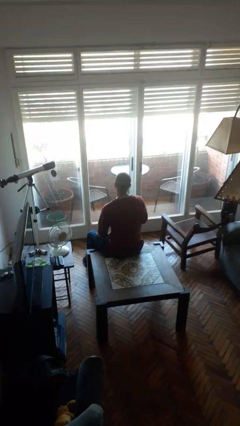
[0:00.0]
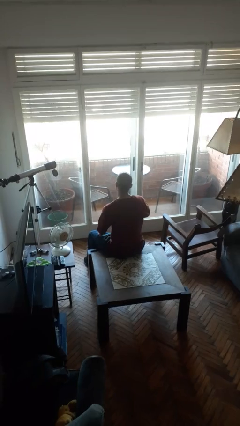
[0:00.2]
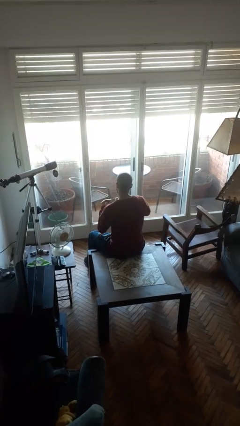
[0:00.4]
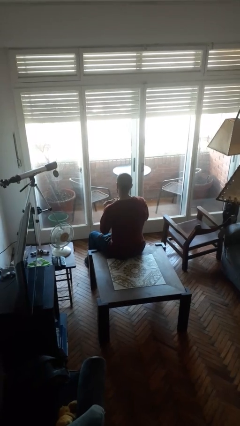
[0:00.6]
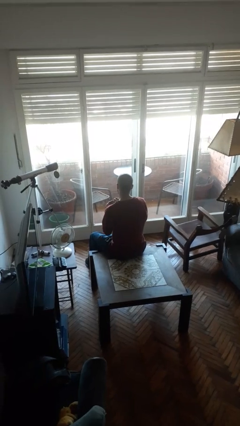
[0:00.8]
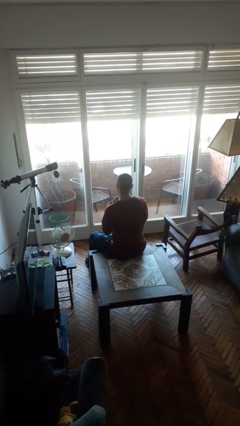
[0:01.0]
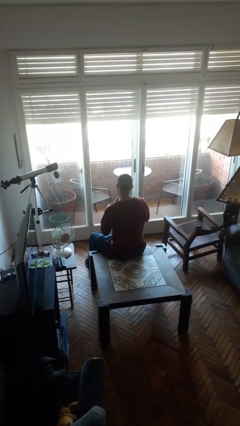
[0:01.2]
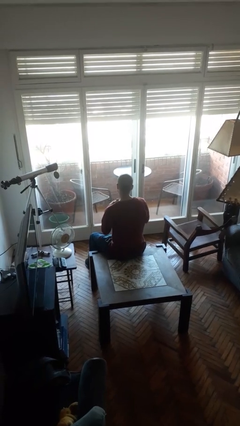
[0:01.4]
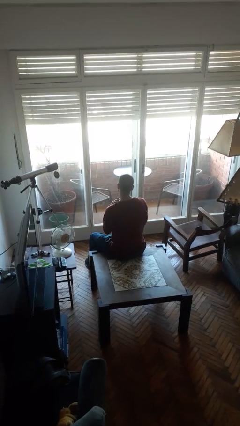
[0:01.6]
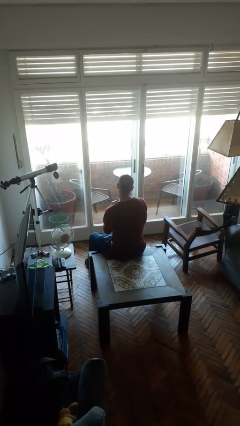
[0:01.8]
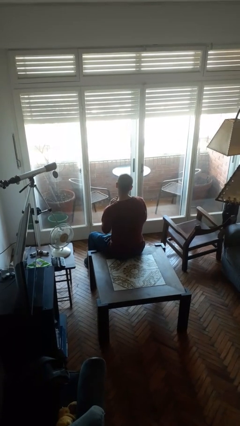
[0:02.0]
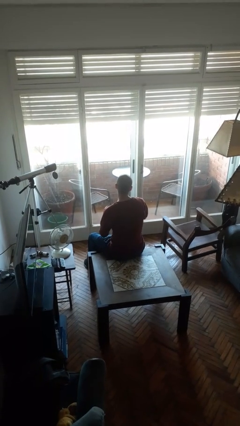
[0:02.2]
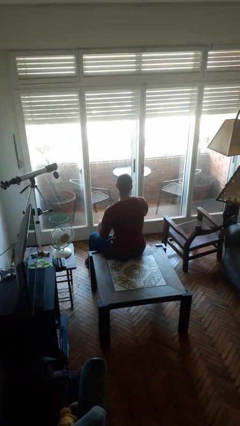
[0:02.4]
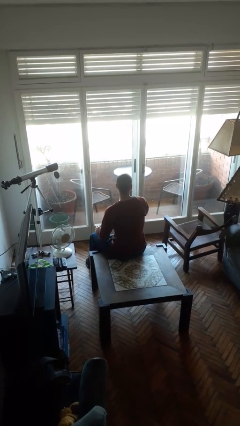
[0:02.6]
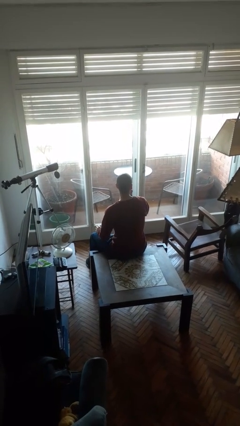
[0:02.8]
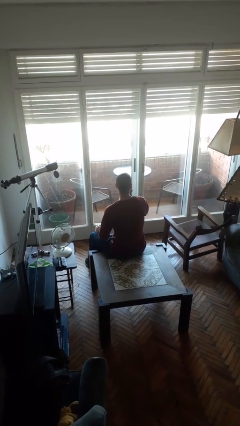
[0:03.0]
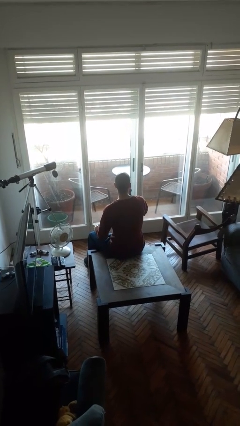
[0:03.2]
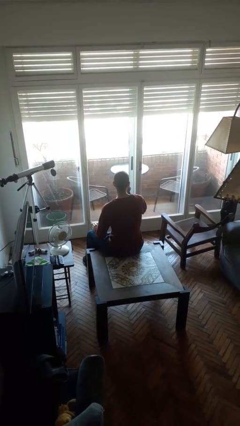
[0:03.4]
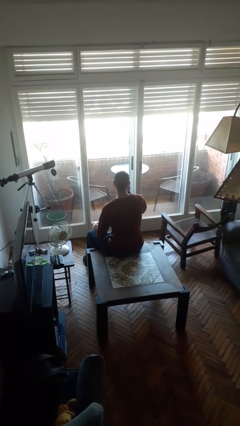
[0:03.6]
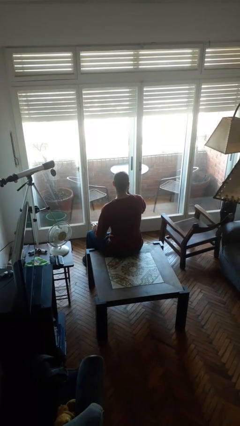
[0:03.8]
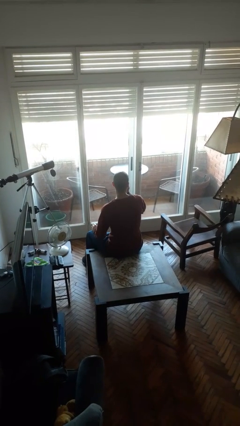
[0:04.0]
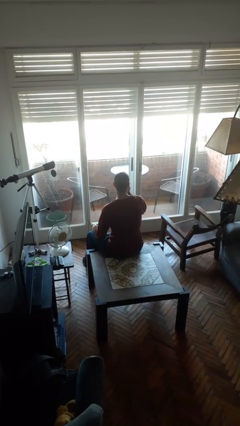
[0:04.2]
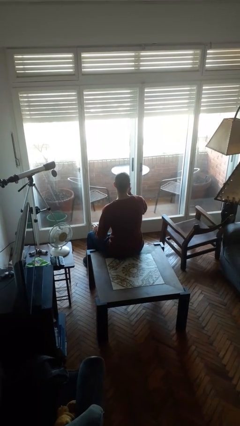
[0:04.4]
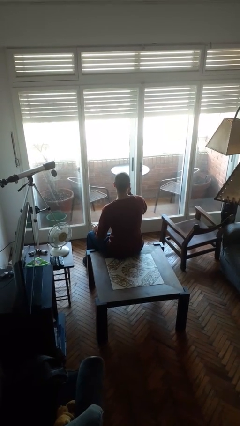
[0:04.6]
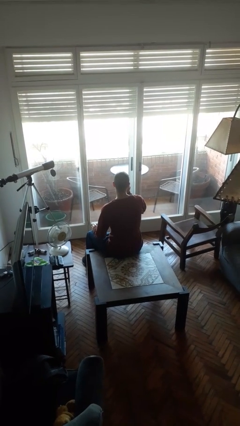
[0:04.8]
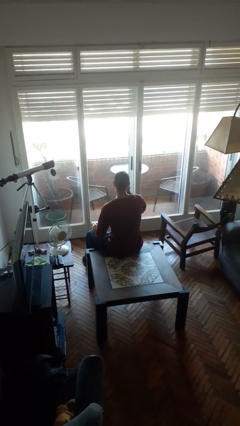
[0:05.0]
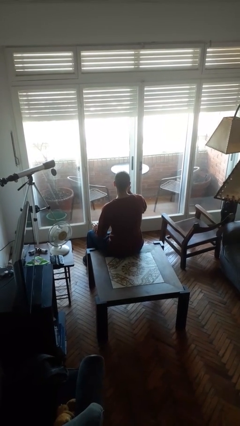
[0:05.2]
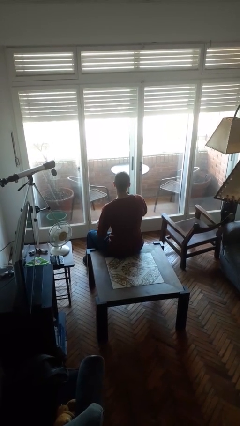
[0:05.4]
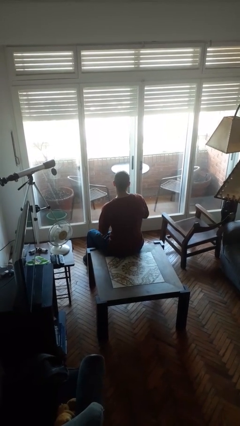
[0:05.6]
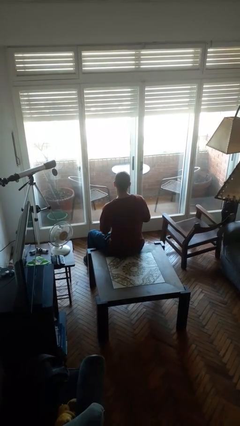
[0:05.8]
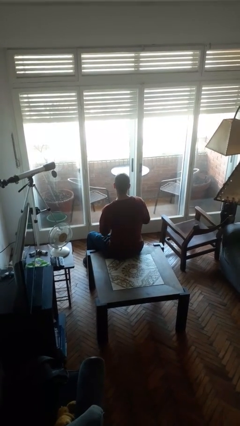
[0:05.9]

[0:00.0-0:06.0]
person applies lip makeup

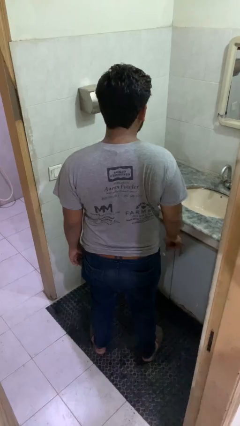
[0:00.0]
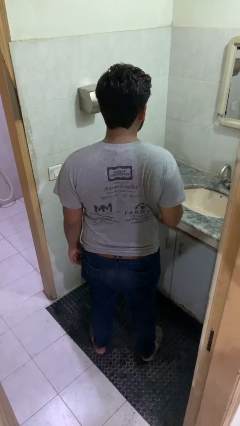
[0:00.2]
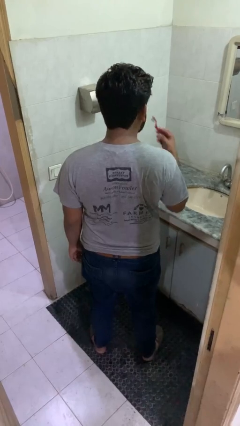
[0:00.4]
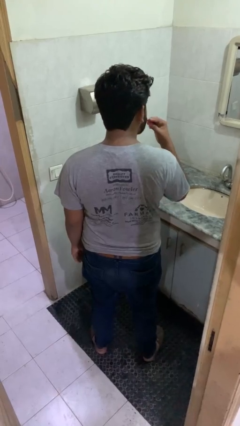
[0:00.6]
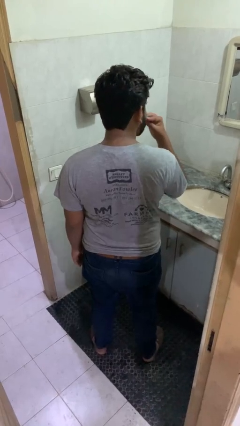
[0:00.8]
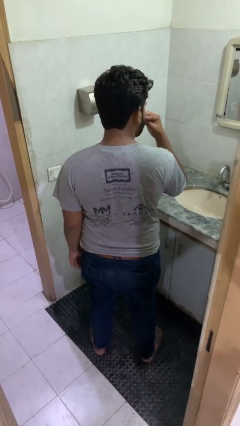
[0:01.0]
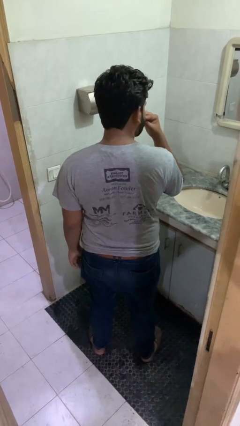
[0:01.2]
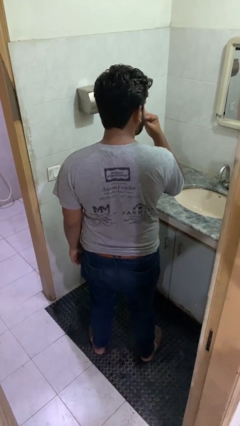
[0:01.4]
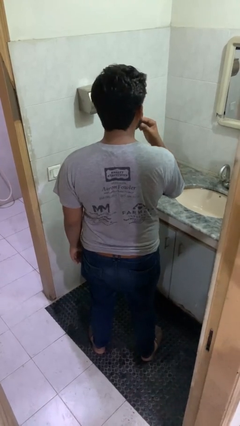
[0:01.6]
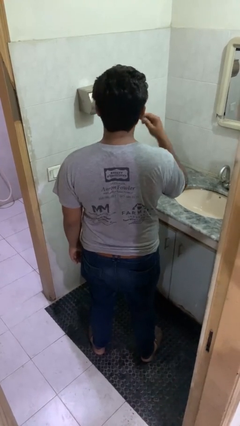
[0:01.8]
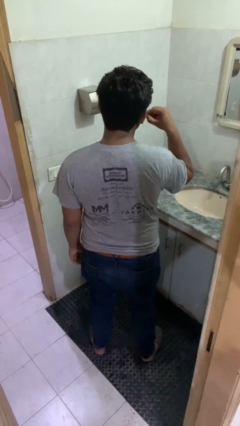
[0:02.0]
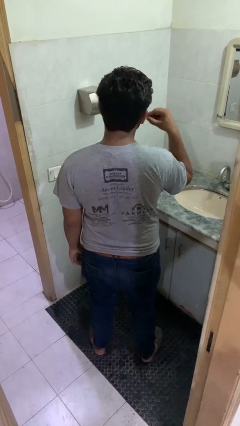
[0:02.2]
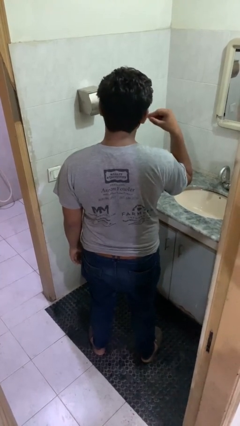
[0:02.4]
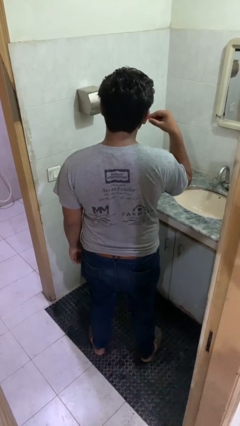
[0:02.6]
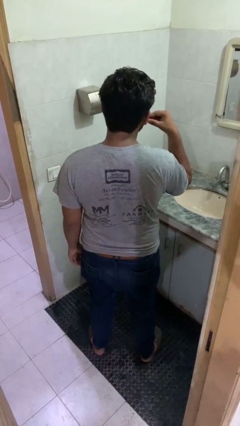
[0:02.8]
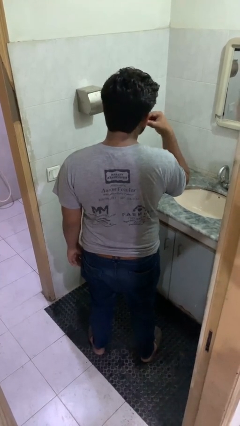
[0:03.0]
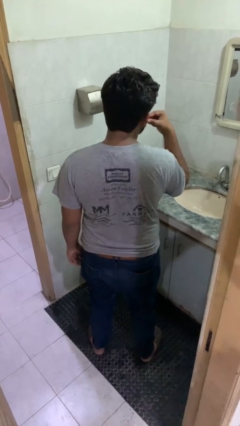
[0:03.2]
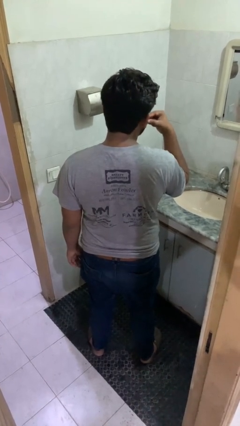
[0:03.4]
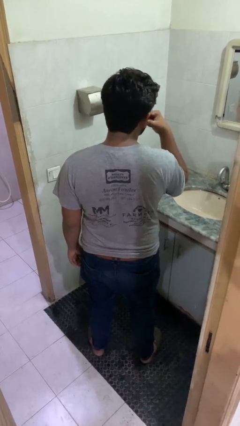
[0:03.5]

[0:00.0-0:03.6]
person brushes teeth

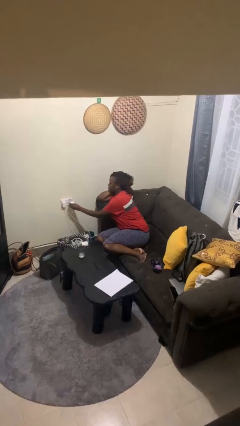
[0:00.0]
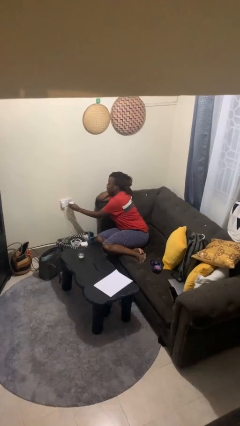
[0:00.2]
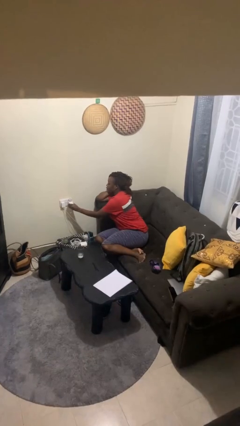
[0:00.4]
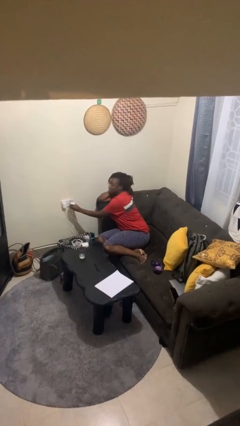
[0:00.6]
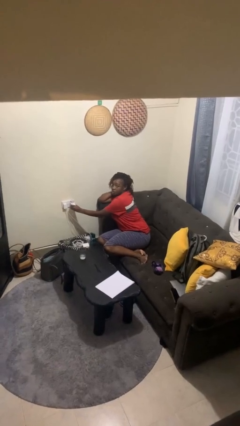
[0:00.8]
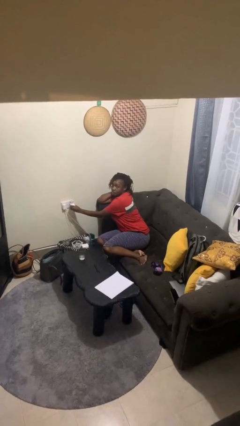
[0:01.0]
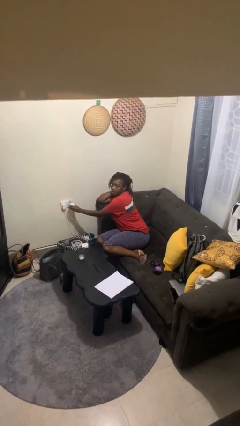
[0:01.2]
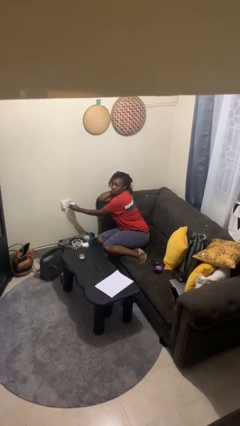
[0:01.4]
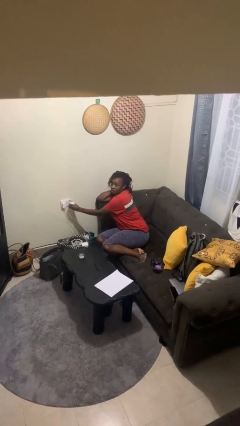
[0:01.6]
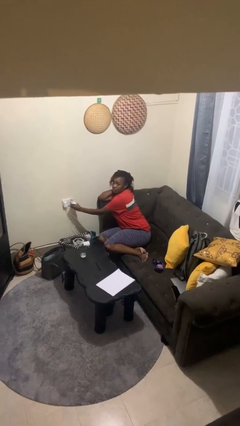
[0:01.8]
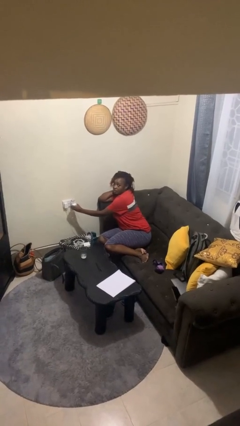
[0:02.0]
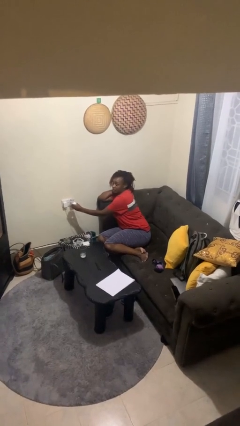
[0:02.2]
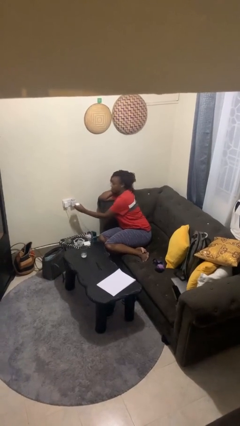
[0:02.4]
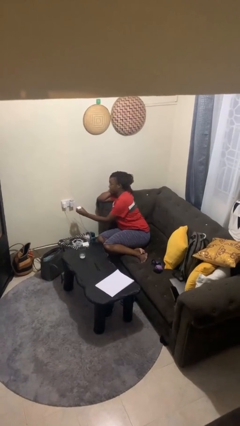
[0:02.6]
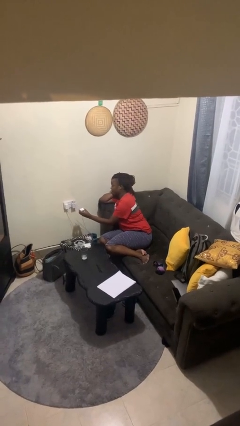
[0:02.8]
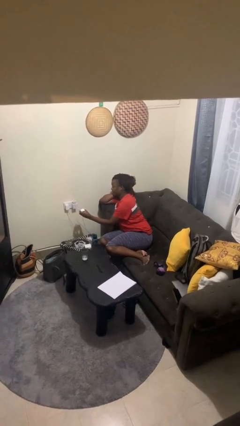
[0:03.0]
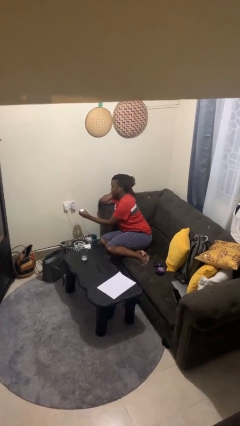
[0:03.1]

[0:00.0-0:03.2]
person plugs into electrical socket

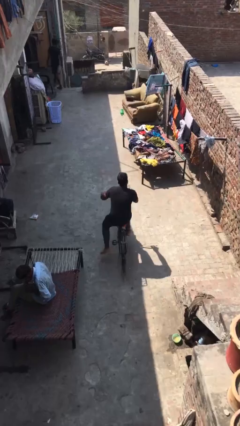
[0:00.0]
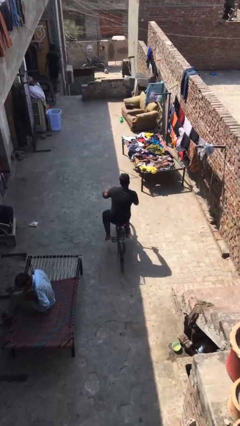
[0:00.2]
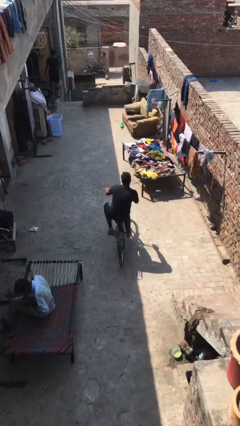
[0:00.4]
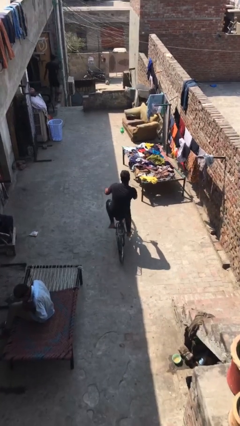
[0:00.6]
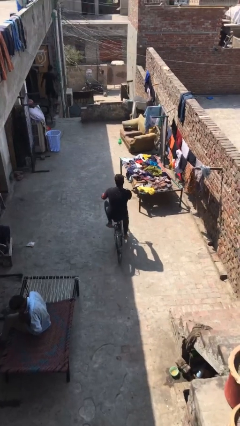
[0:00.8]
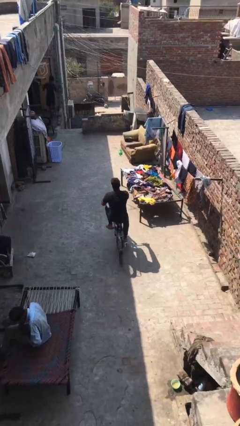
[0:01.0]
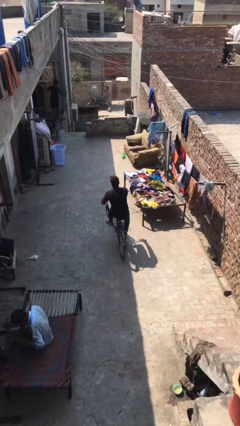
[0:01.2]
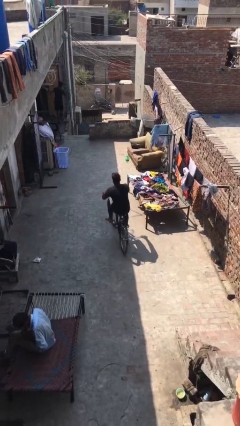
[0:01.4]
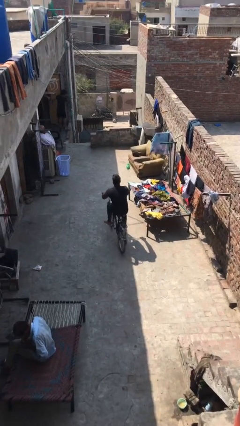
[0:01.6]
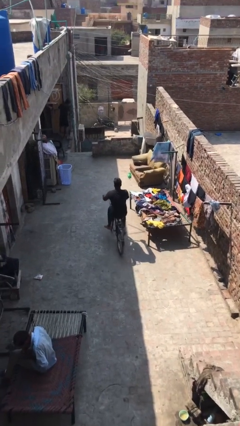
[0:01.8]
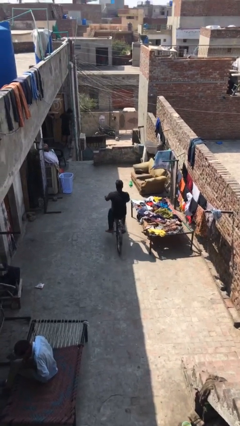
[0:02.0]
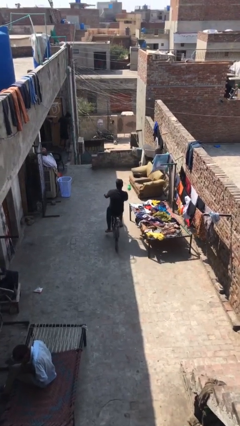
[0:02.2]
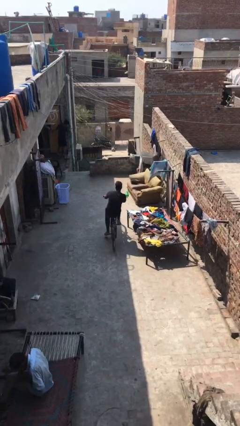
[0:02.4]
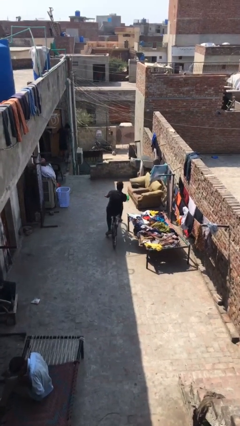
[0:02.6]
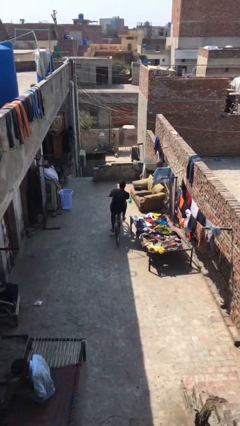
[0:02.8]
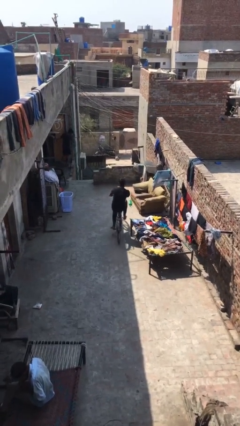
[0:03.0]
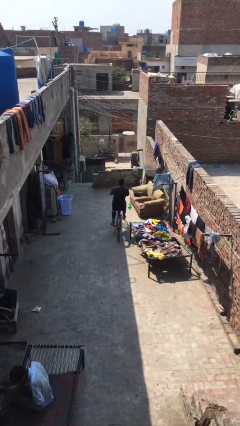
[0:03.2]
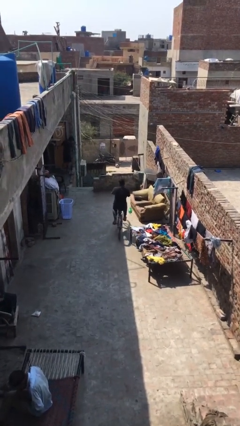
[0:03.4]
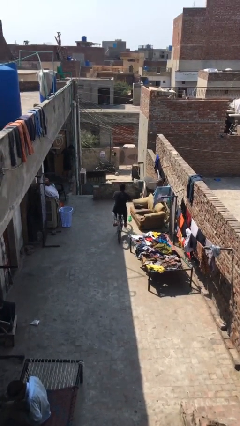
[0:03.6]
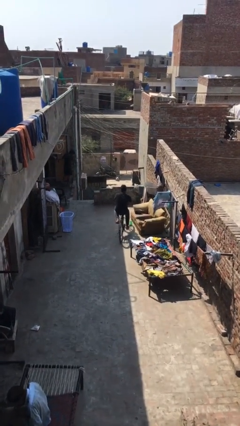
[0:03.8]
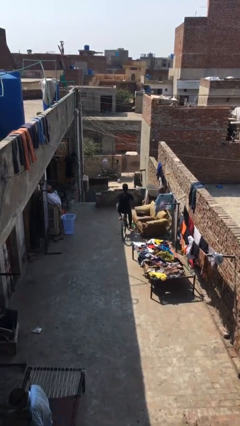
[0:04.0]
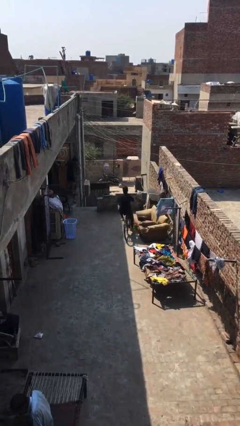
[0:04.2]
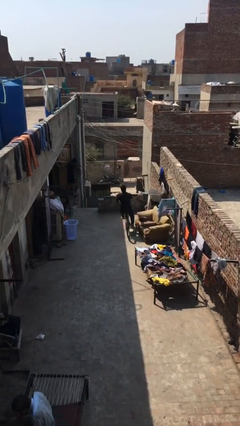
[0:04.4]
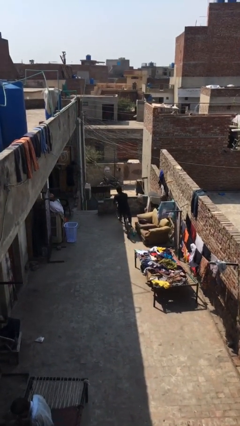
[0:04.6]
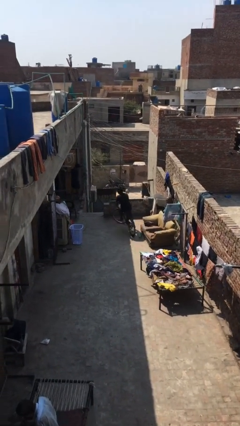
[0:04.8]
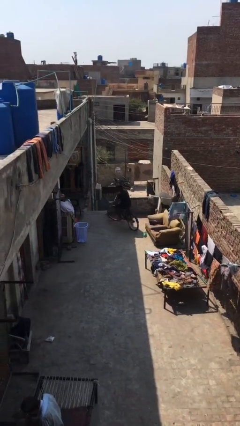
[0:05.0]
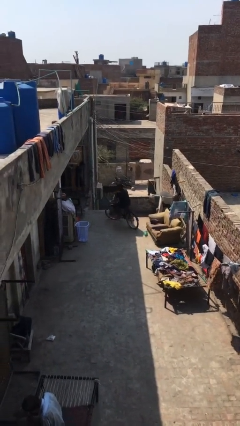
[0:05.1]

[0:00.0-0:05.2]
person rides bicycle
